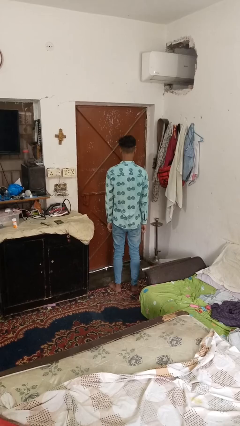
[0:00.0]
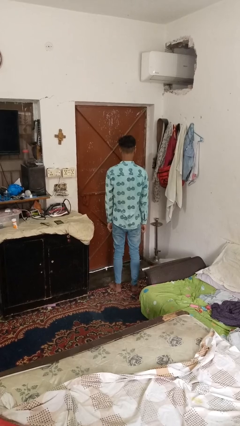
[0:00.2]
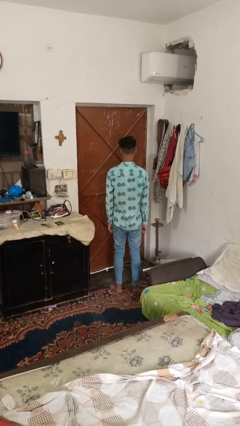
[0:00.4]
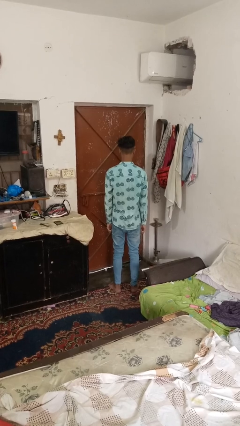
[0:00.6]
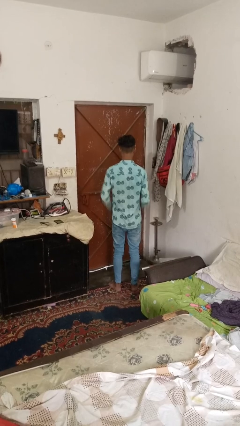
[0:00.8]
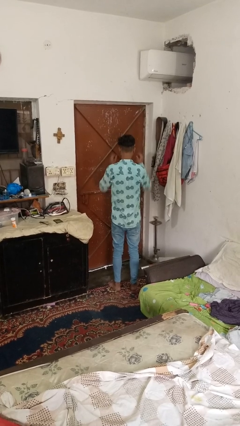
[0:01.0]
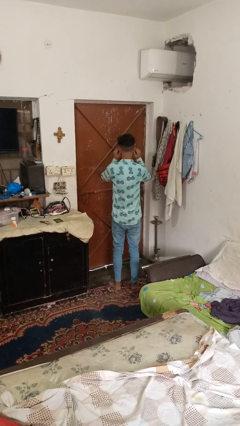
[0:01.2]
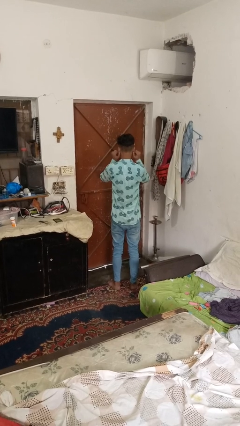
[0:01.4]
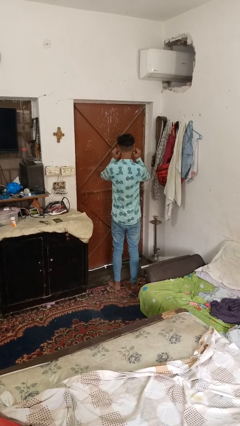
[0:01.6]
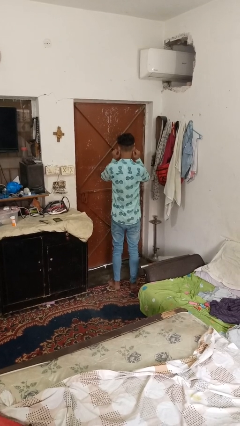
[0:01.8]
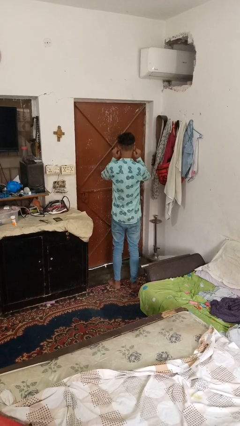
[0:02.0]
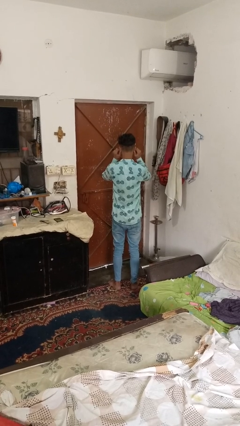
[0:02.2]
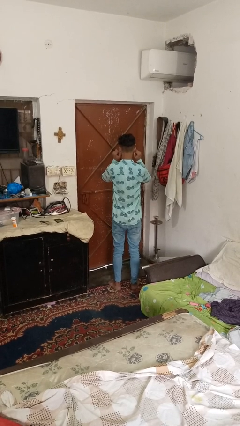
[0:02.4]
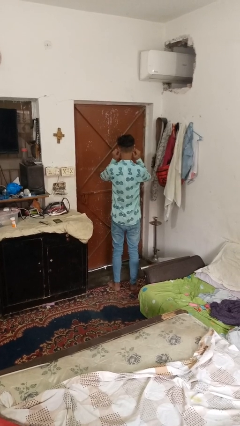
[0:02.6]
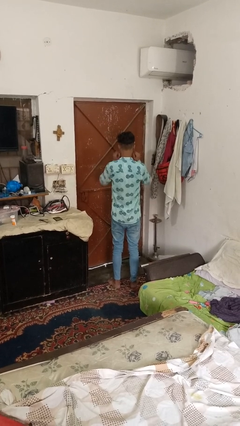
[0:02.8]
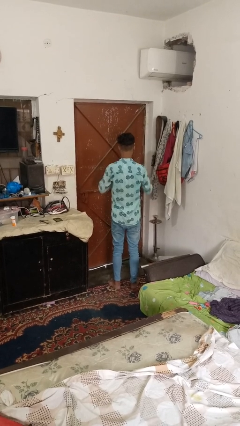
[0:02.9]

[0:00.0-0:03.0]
person touches earlobe

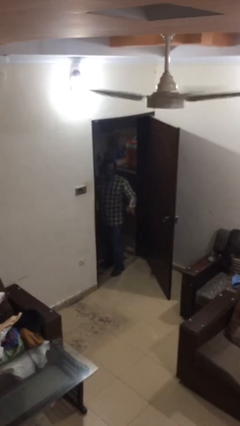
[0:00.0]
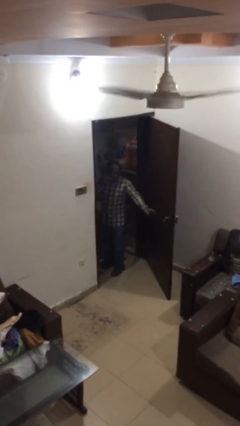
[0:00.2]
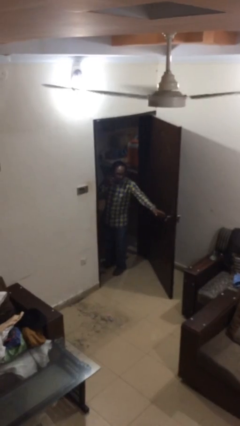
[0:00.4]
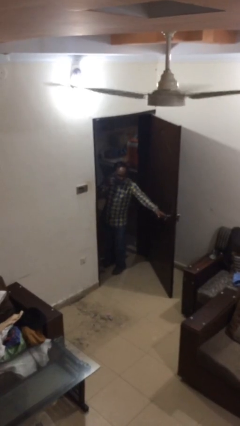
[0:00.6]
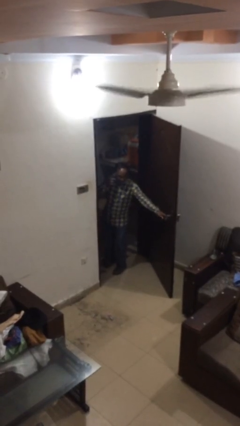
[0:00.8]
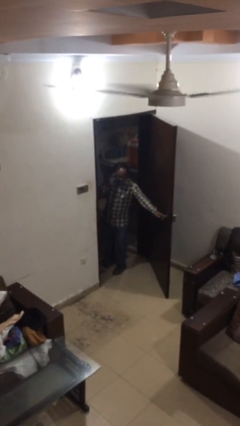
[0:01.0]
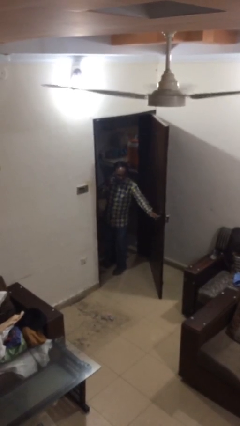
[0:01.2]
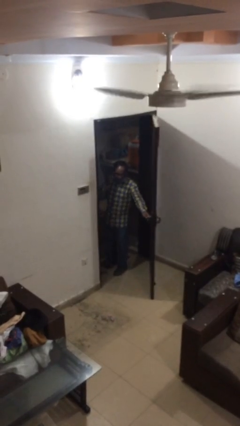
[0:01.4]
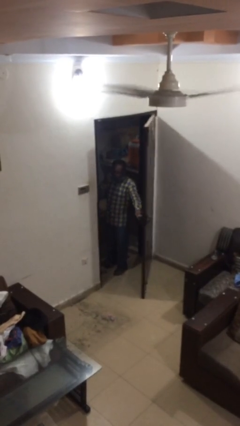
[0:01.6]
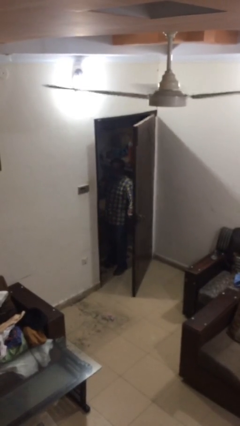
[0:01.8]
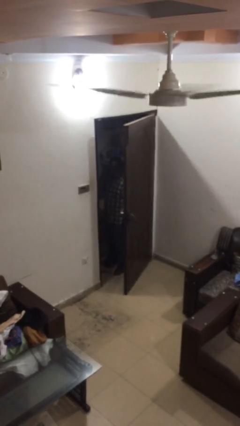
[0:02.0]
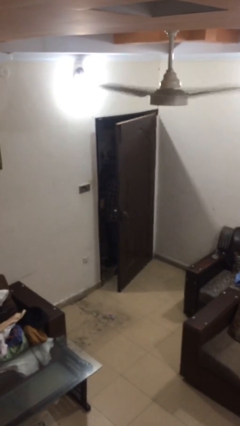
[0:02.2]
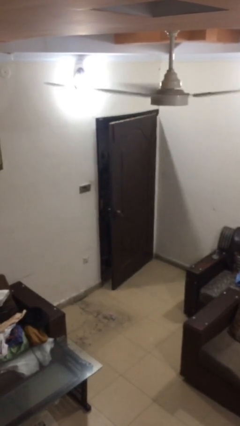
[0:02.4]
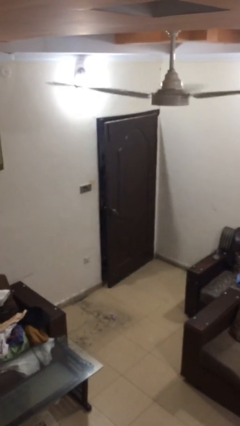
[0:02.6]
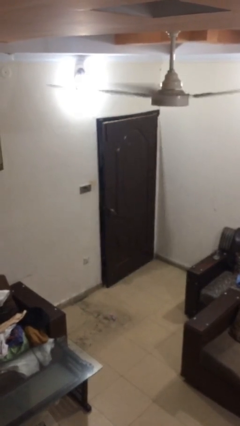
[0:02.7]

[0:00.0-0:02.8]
person closes facility door

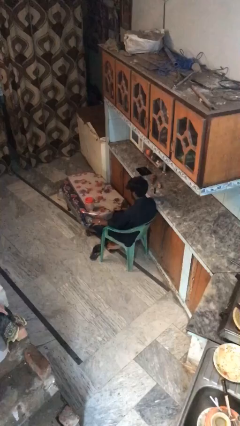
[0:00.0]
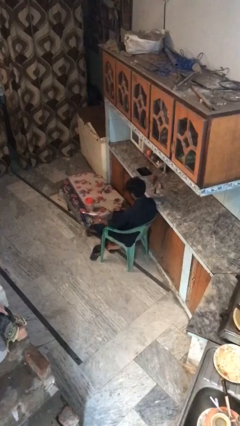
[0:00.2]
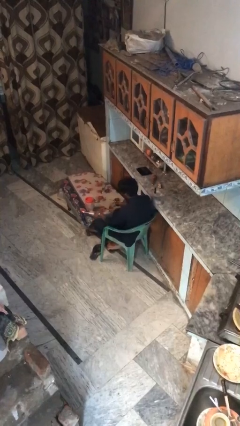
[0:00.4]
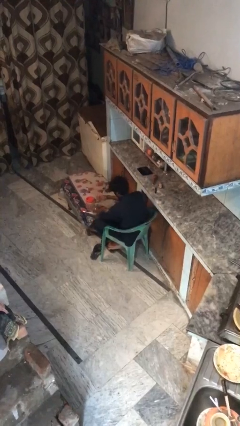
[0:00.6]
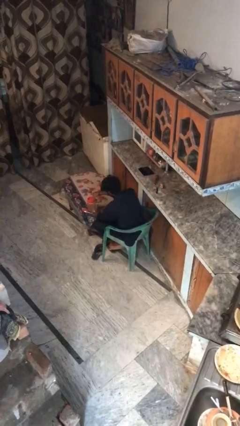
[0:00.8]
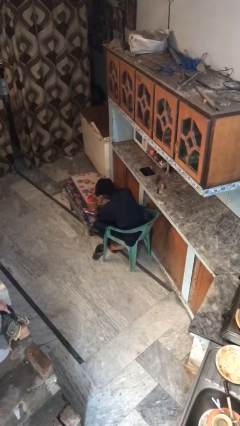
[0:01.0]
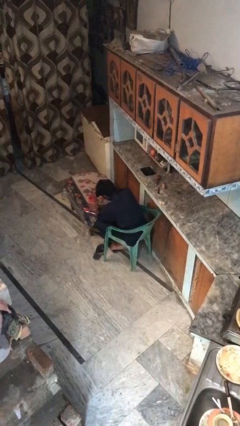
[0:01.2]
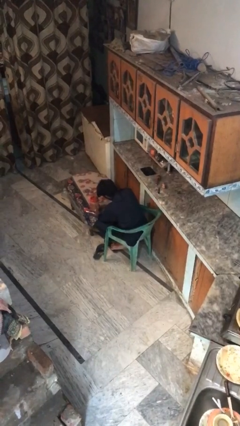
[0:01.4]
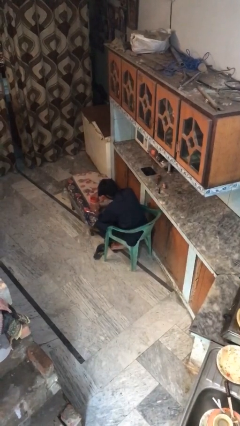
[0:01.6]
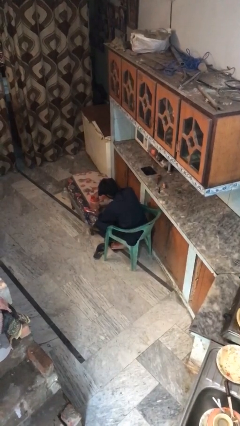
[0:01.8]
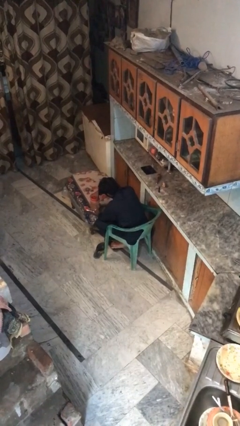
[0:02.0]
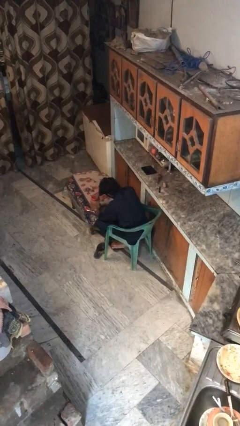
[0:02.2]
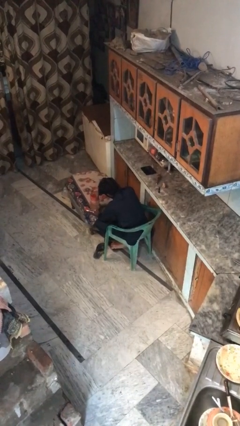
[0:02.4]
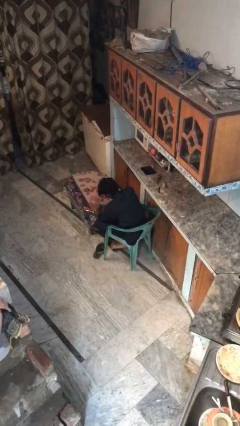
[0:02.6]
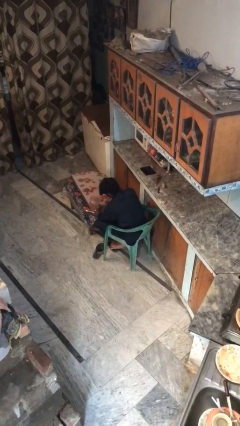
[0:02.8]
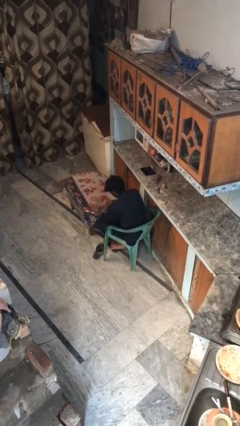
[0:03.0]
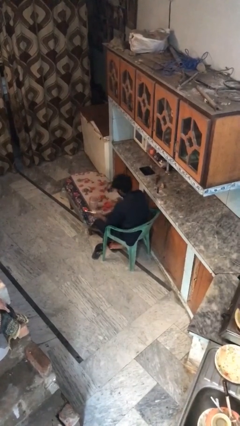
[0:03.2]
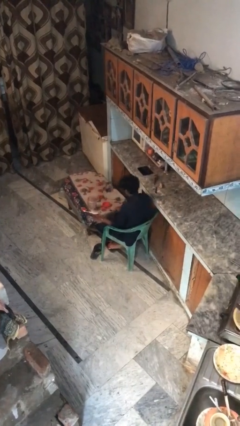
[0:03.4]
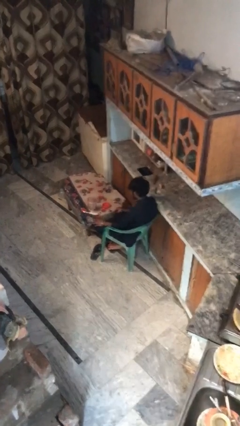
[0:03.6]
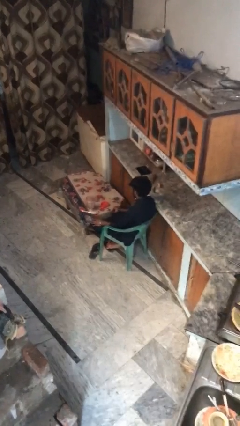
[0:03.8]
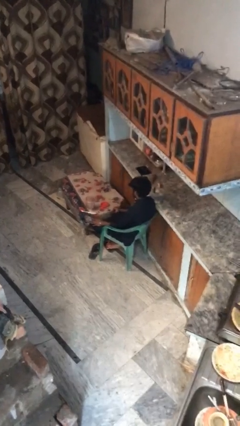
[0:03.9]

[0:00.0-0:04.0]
person opens jar

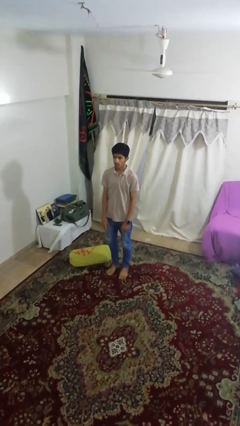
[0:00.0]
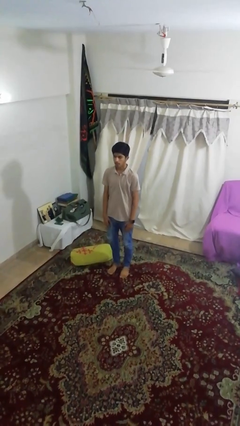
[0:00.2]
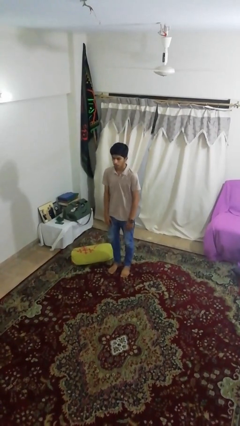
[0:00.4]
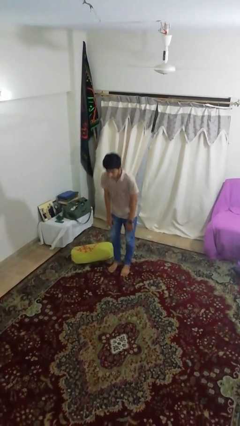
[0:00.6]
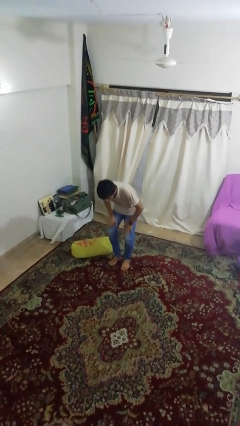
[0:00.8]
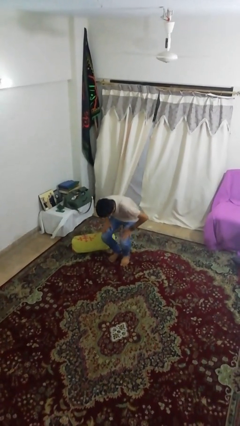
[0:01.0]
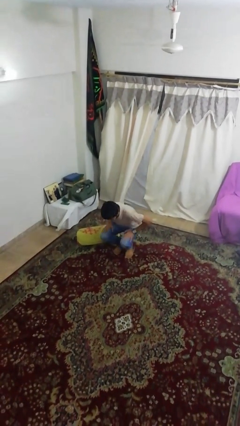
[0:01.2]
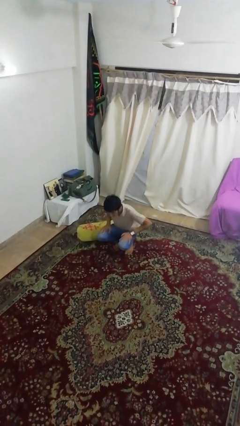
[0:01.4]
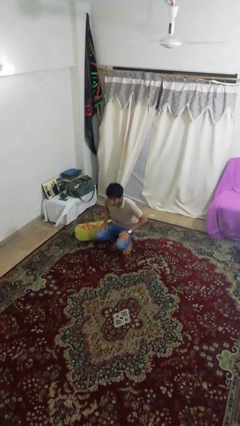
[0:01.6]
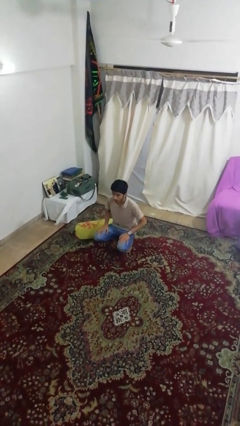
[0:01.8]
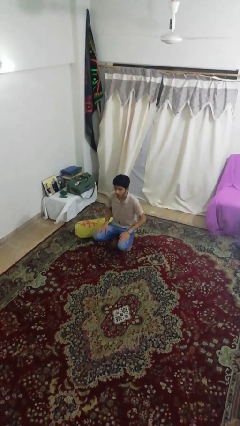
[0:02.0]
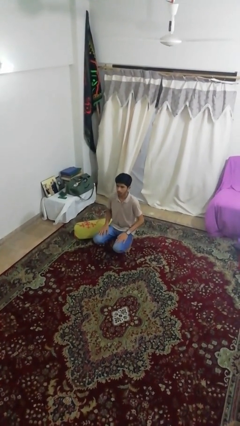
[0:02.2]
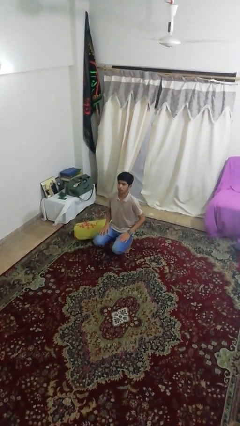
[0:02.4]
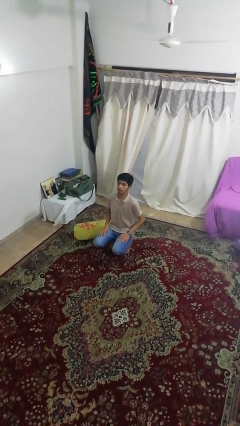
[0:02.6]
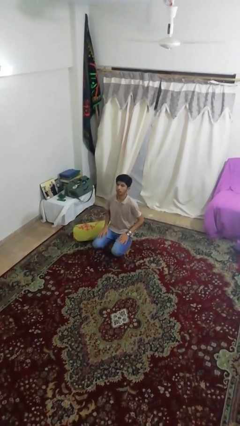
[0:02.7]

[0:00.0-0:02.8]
person squats

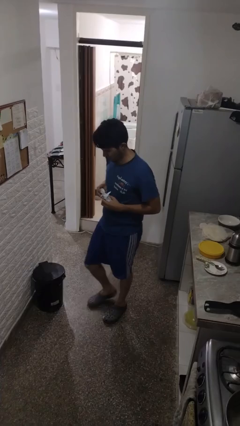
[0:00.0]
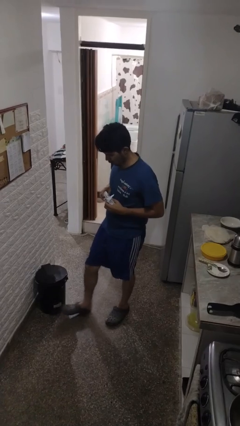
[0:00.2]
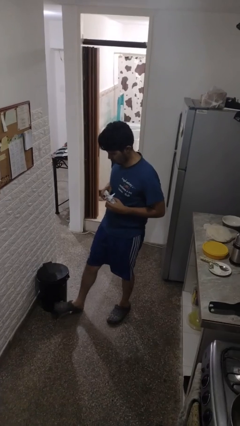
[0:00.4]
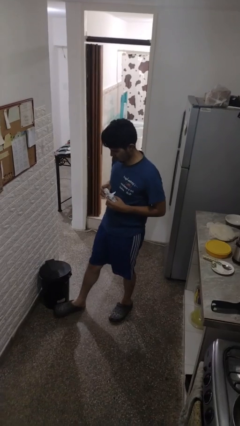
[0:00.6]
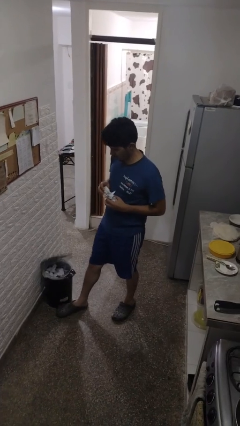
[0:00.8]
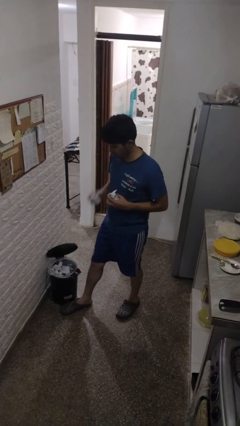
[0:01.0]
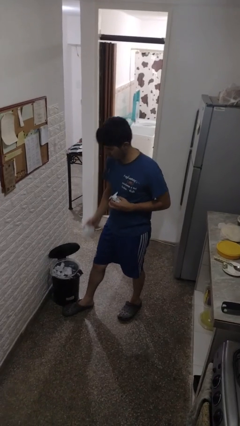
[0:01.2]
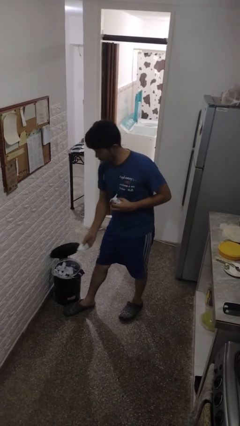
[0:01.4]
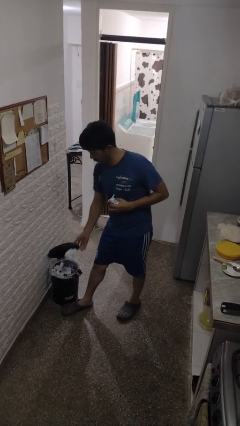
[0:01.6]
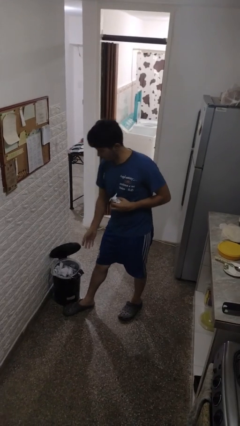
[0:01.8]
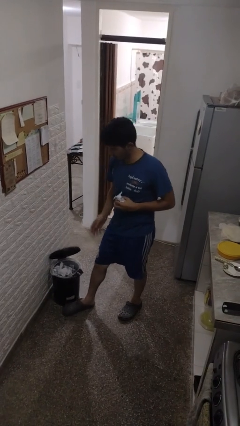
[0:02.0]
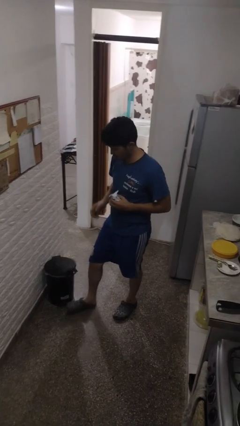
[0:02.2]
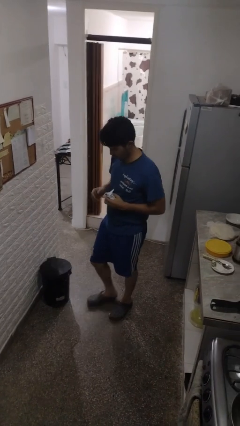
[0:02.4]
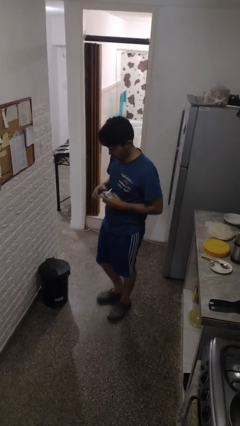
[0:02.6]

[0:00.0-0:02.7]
person discards trash

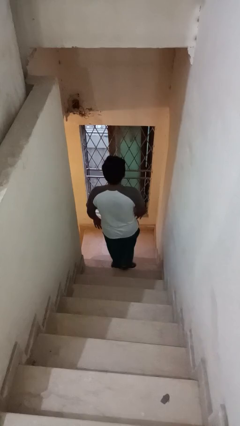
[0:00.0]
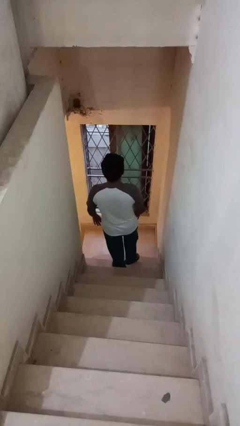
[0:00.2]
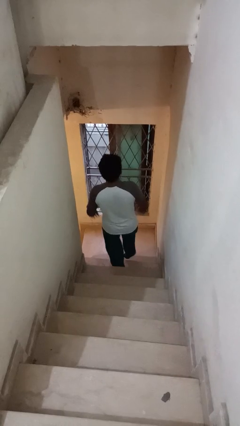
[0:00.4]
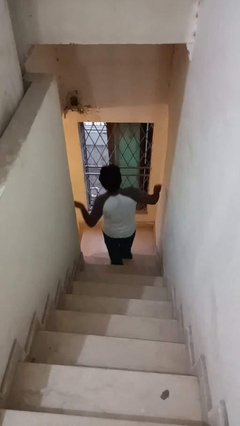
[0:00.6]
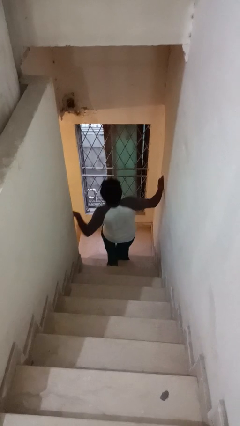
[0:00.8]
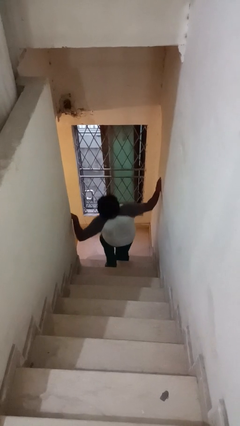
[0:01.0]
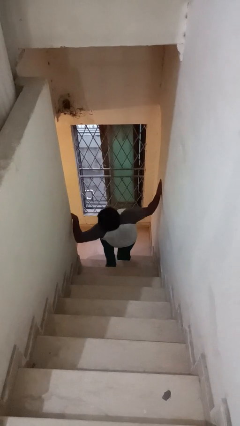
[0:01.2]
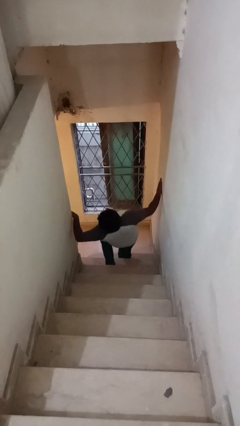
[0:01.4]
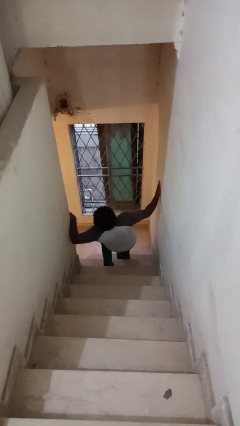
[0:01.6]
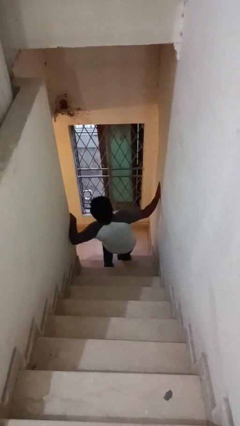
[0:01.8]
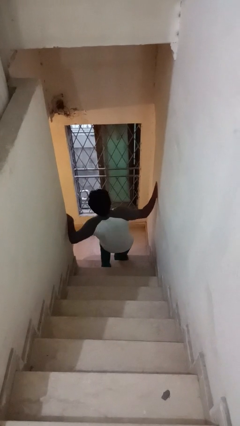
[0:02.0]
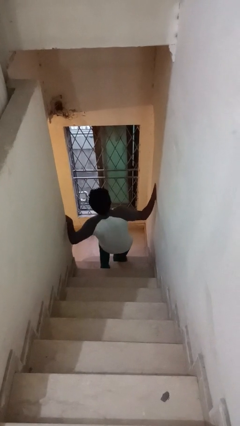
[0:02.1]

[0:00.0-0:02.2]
person trips on stair
